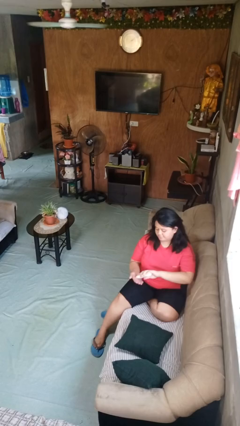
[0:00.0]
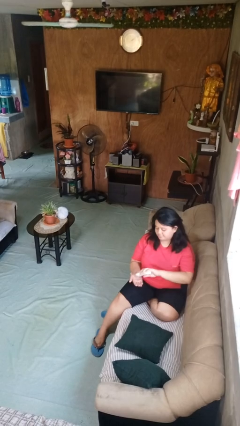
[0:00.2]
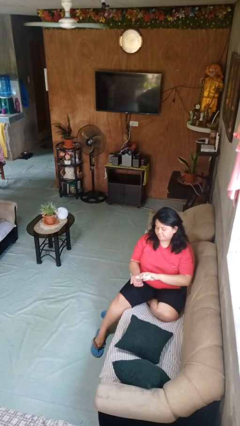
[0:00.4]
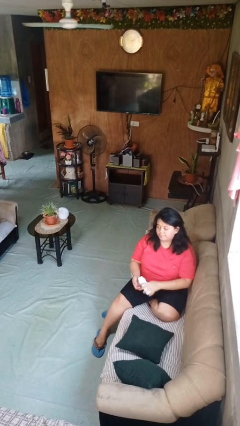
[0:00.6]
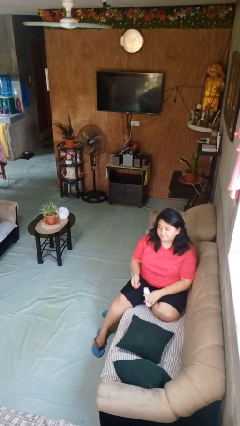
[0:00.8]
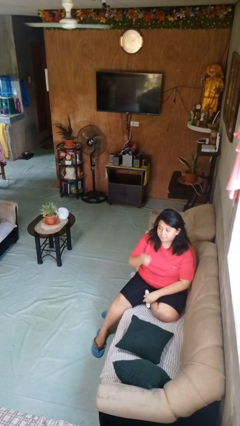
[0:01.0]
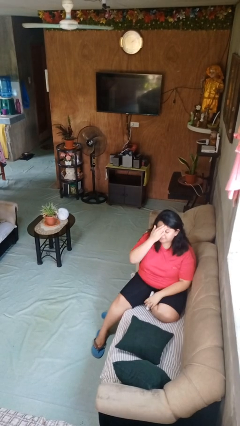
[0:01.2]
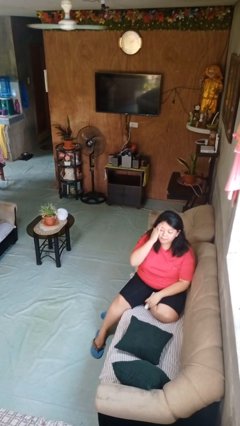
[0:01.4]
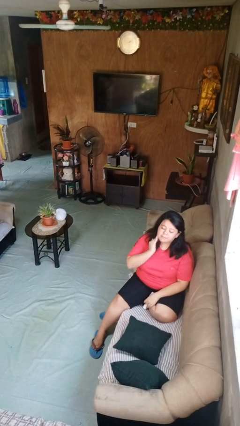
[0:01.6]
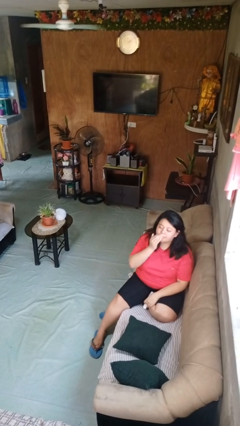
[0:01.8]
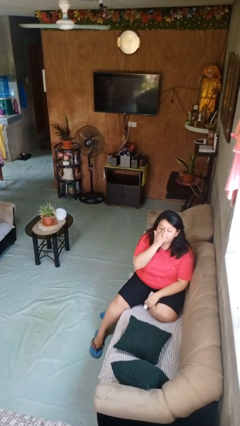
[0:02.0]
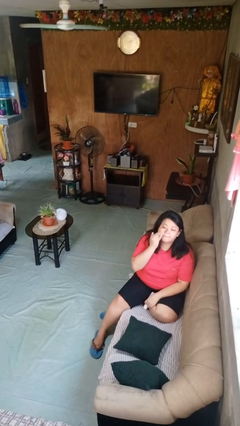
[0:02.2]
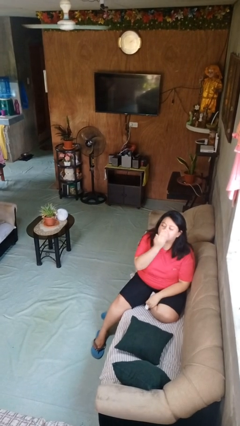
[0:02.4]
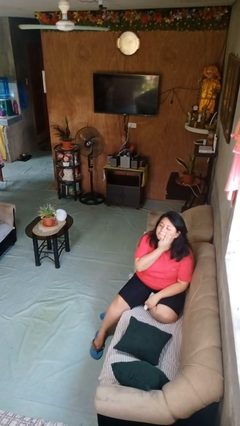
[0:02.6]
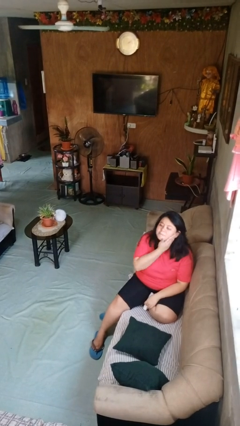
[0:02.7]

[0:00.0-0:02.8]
person applies facial moisturizer

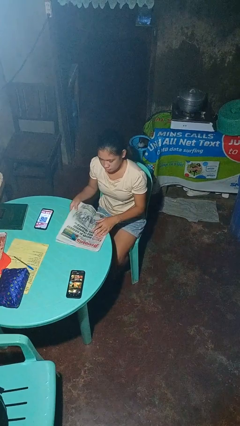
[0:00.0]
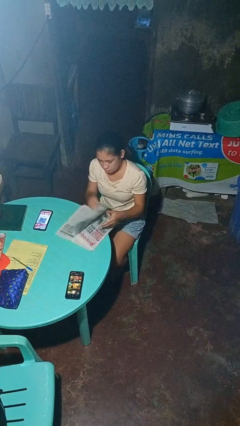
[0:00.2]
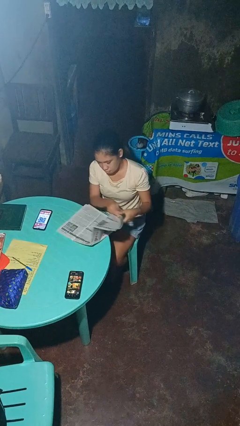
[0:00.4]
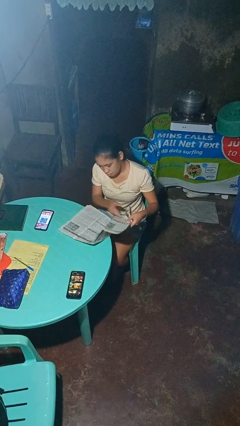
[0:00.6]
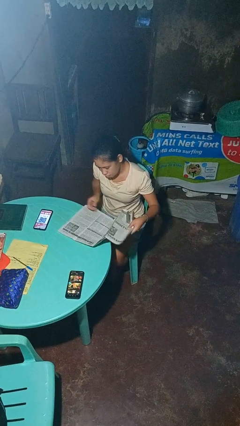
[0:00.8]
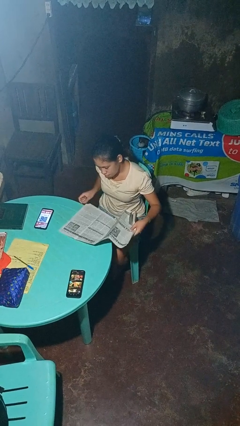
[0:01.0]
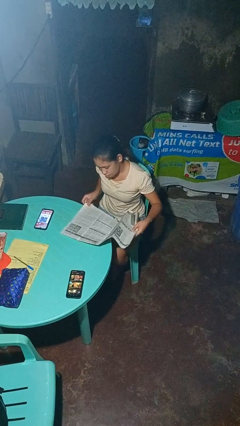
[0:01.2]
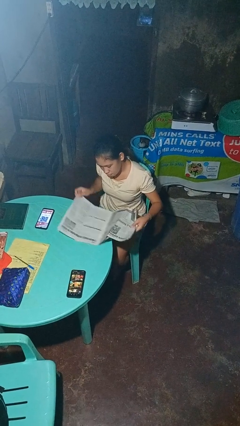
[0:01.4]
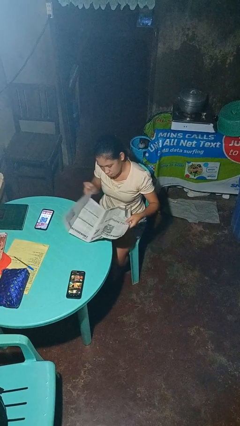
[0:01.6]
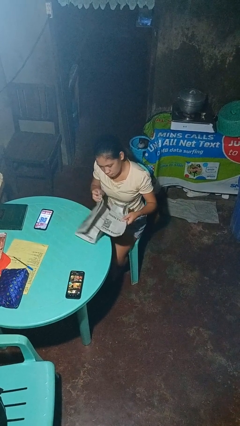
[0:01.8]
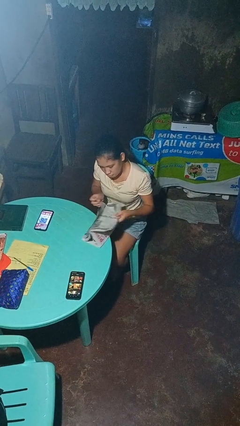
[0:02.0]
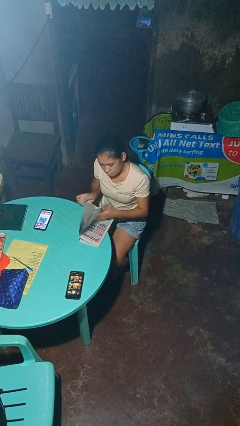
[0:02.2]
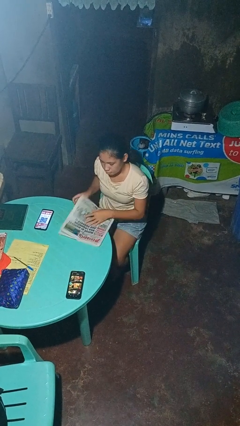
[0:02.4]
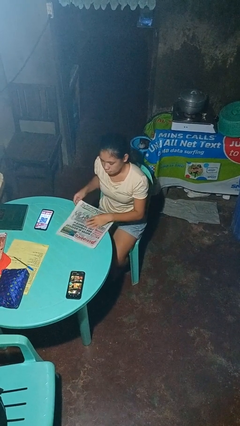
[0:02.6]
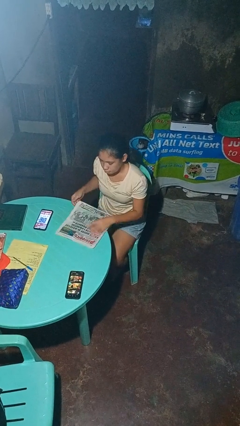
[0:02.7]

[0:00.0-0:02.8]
person reads newspaper

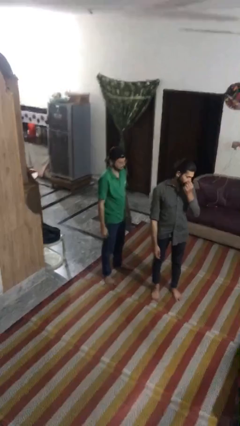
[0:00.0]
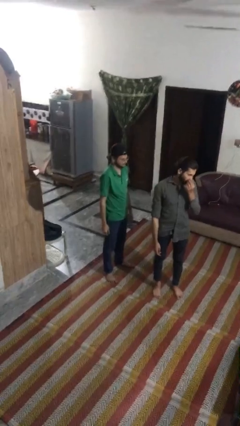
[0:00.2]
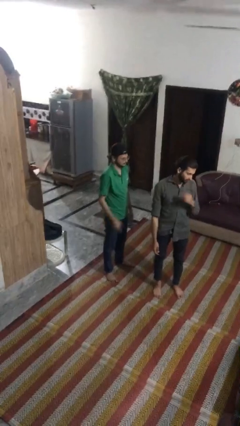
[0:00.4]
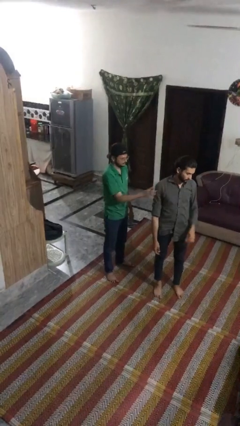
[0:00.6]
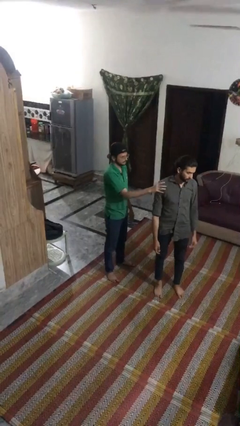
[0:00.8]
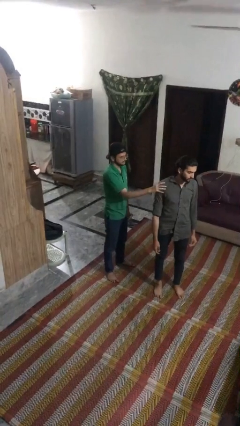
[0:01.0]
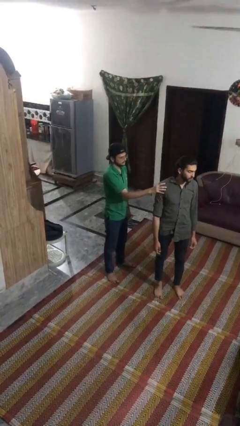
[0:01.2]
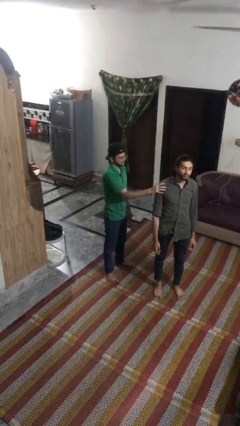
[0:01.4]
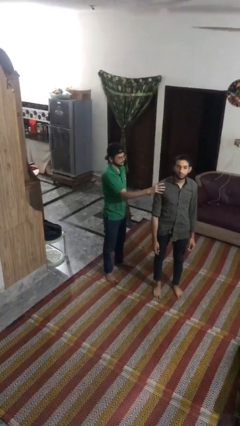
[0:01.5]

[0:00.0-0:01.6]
person grabs person by shoulder

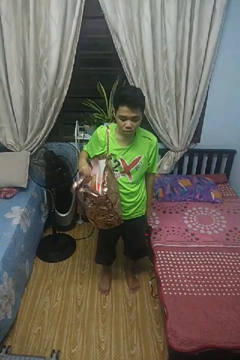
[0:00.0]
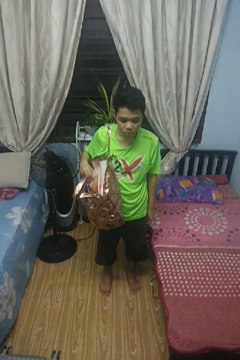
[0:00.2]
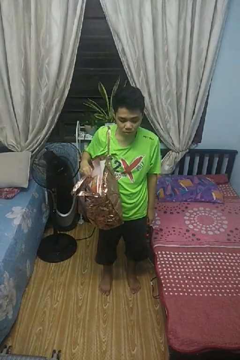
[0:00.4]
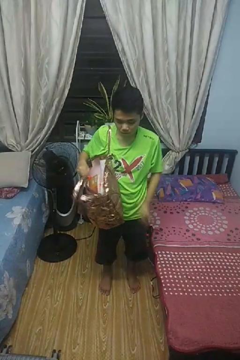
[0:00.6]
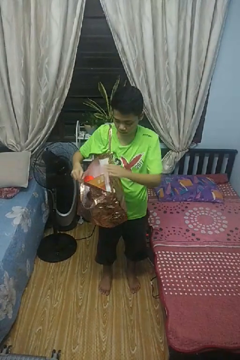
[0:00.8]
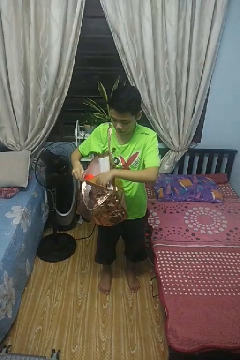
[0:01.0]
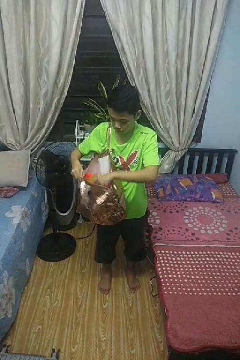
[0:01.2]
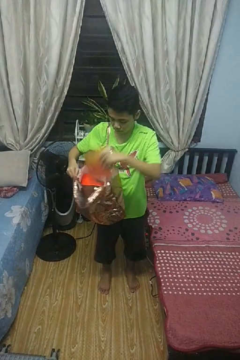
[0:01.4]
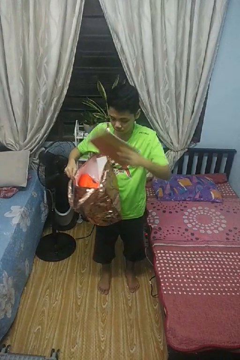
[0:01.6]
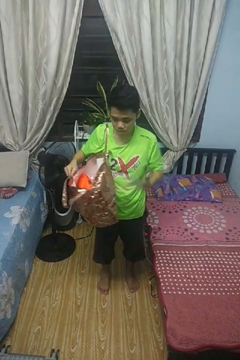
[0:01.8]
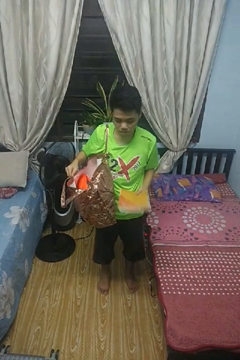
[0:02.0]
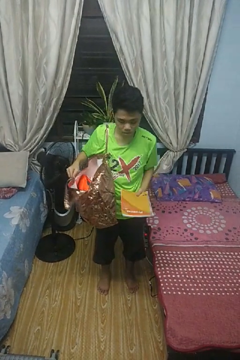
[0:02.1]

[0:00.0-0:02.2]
person takes object from bag

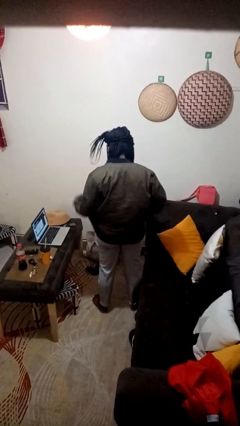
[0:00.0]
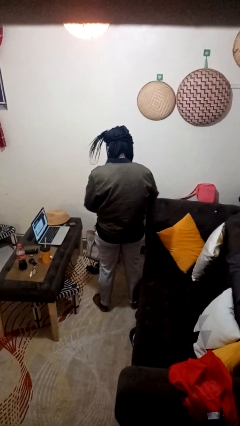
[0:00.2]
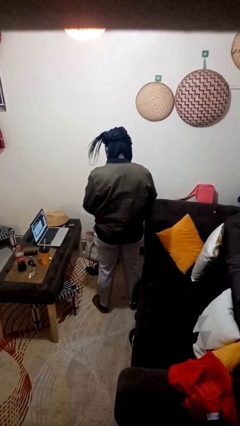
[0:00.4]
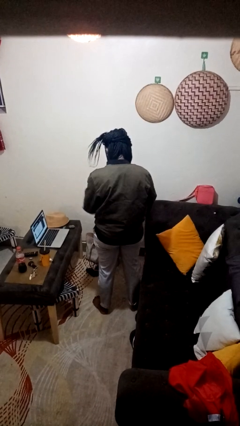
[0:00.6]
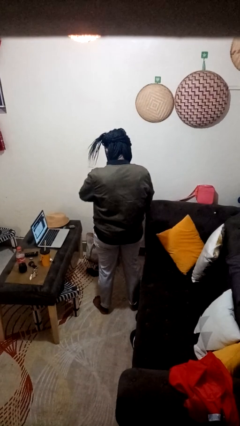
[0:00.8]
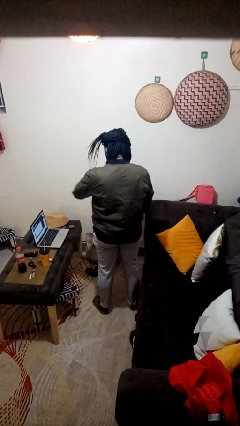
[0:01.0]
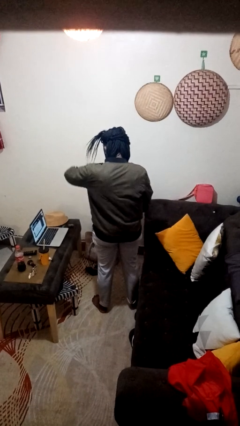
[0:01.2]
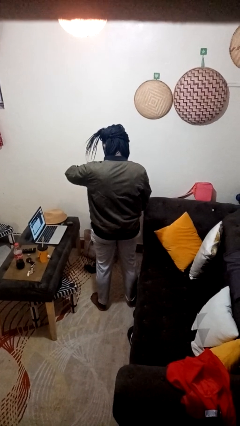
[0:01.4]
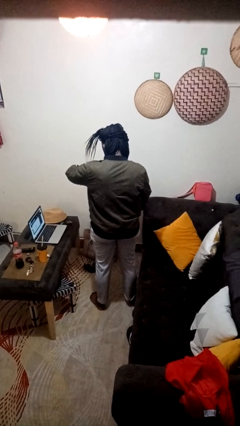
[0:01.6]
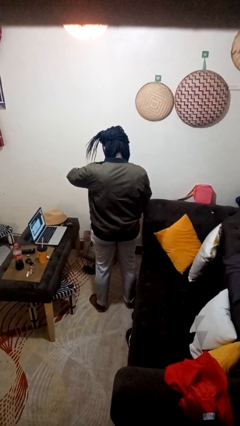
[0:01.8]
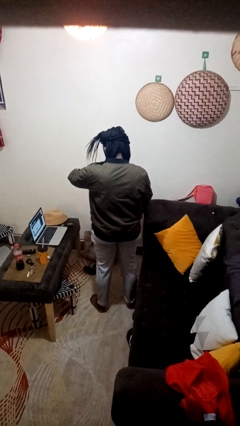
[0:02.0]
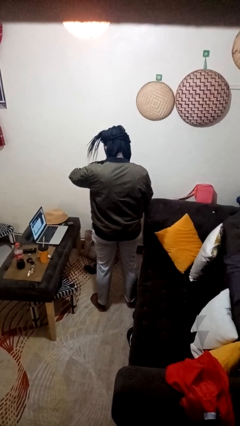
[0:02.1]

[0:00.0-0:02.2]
person zips up jacket

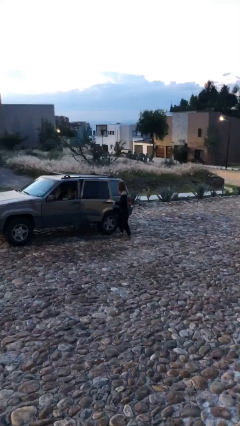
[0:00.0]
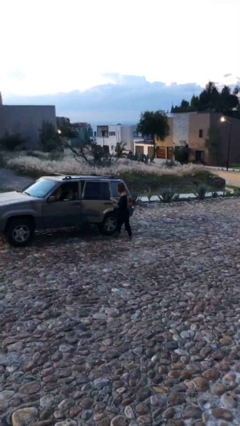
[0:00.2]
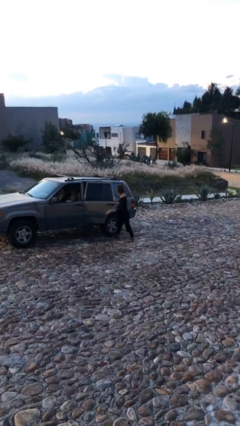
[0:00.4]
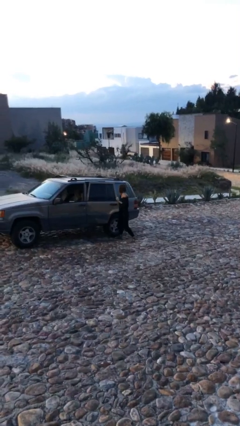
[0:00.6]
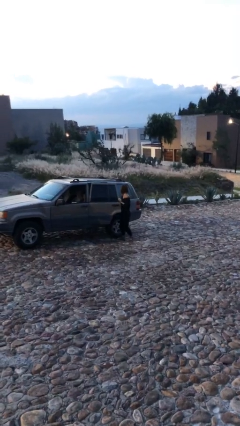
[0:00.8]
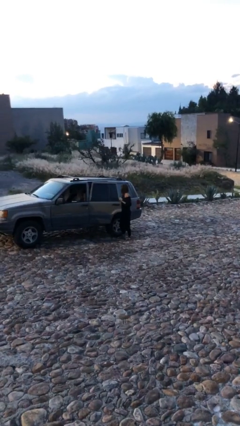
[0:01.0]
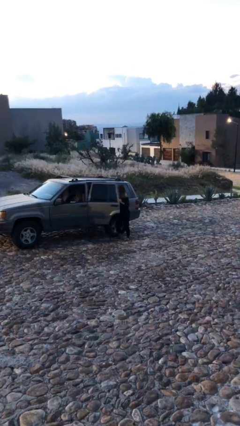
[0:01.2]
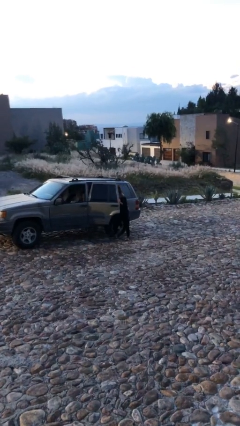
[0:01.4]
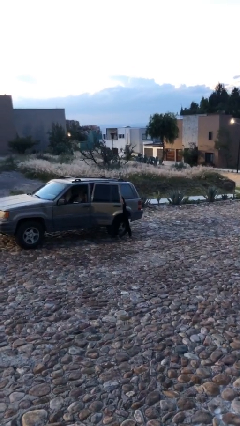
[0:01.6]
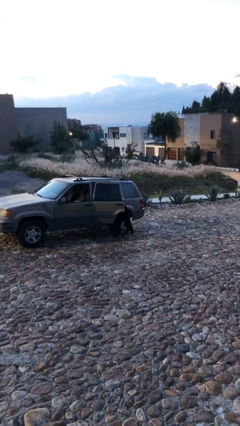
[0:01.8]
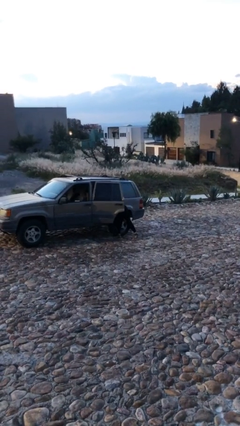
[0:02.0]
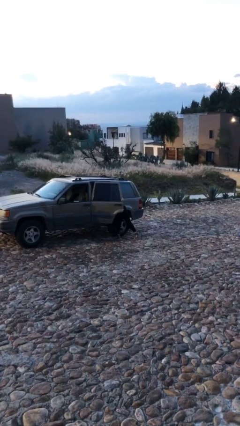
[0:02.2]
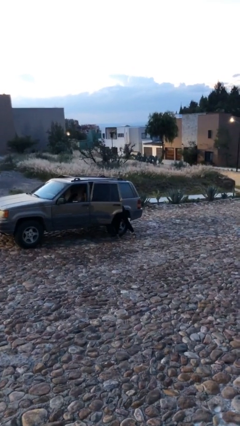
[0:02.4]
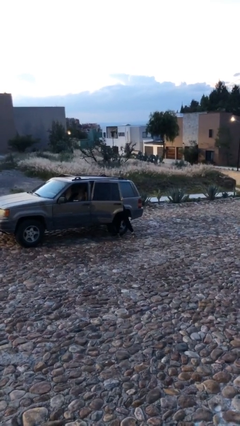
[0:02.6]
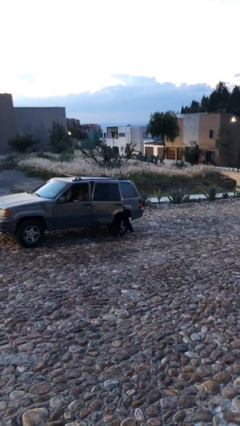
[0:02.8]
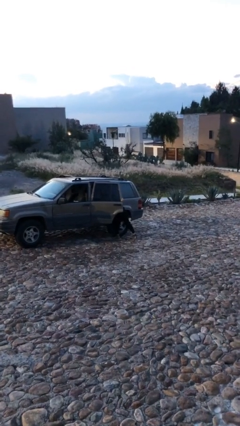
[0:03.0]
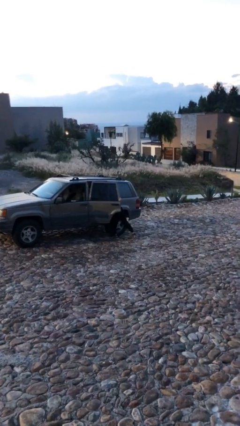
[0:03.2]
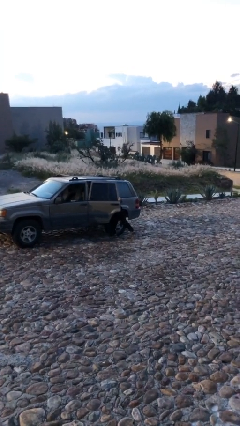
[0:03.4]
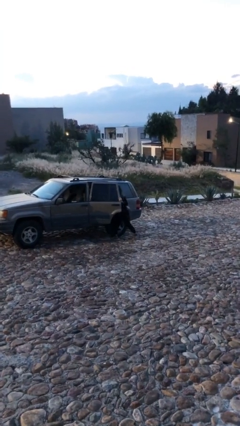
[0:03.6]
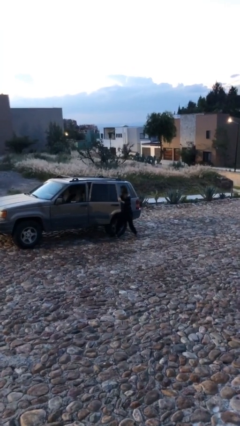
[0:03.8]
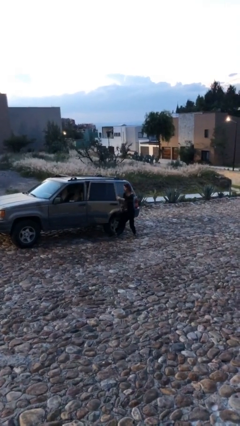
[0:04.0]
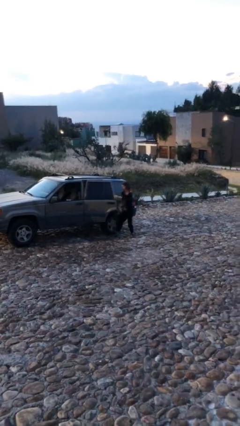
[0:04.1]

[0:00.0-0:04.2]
person unloads car

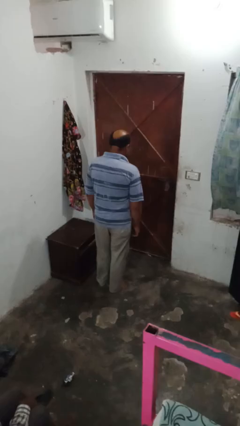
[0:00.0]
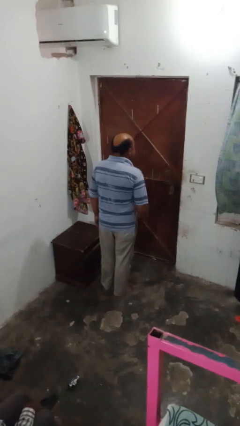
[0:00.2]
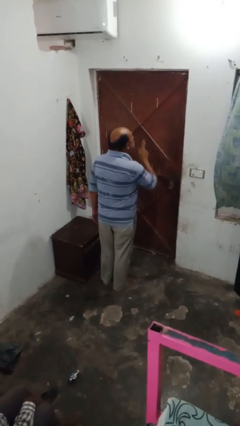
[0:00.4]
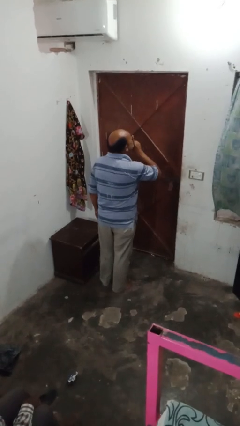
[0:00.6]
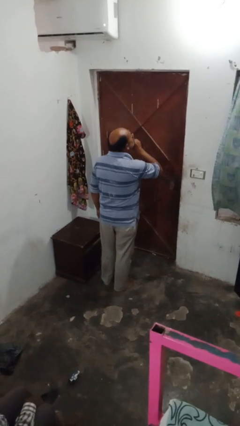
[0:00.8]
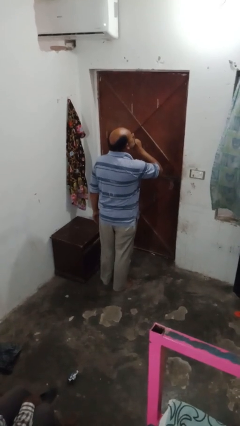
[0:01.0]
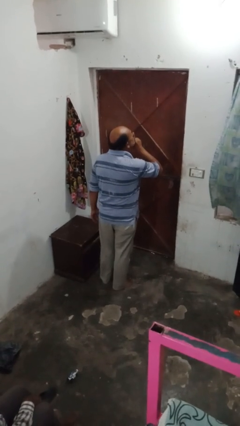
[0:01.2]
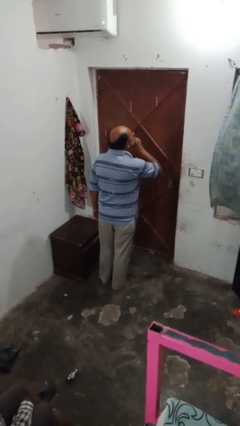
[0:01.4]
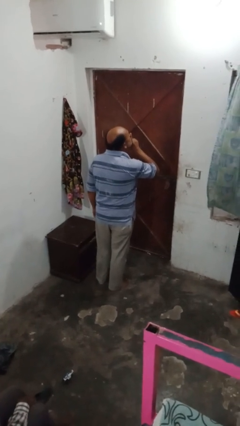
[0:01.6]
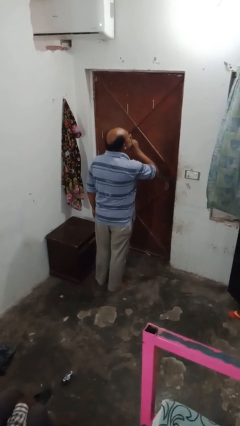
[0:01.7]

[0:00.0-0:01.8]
person gestures be quiet
